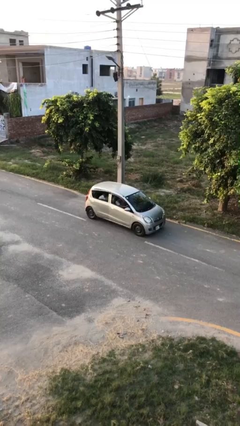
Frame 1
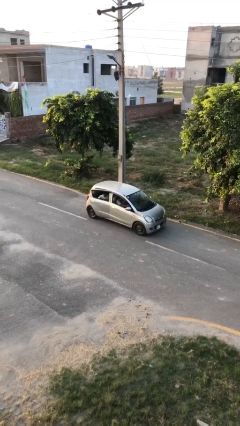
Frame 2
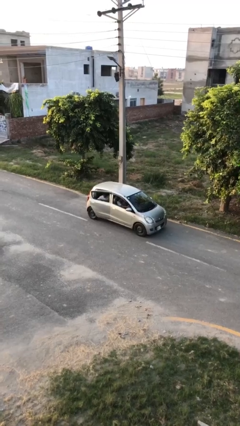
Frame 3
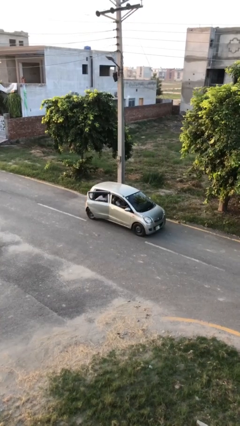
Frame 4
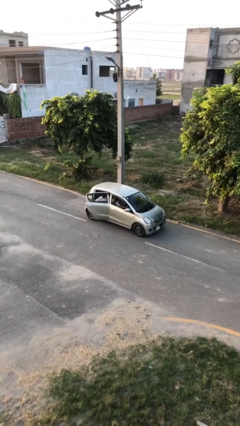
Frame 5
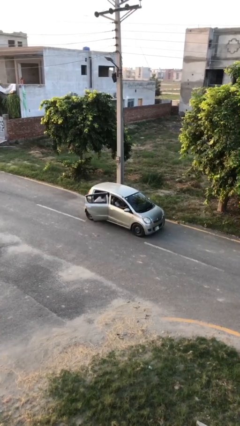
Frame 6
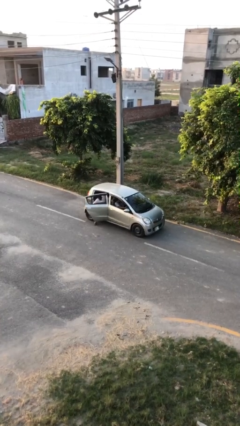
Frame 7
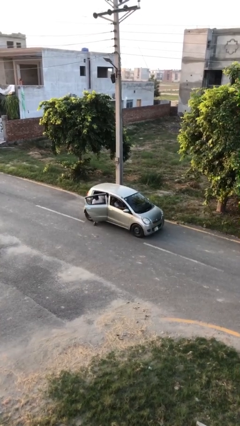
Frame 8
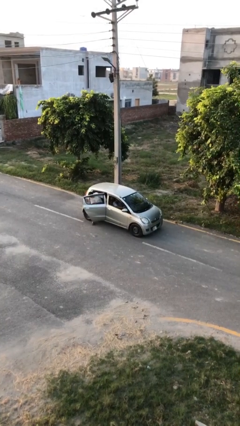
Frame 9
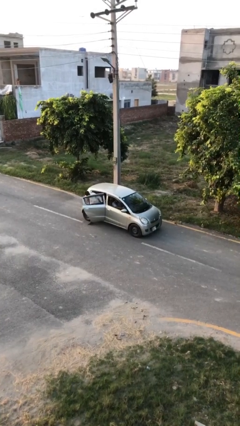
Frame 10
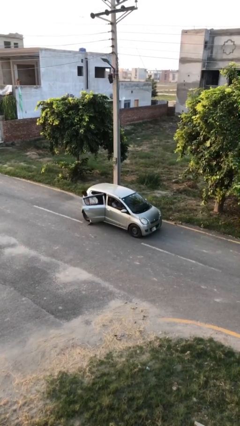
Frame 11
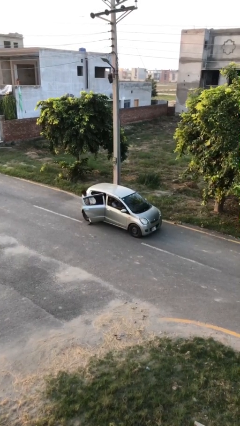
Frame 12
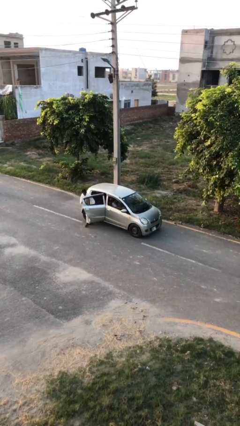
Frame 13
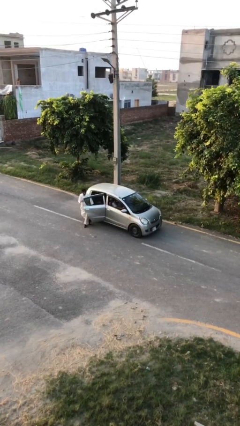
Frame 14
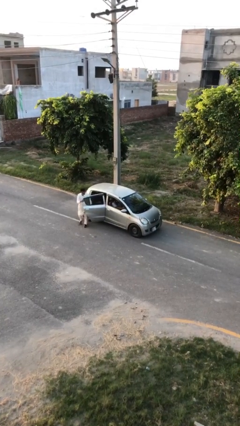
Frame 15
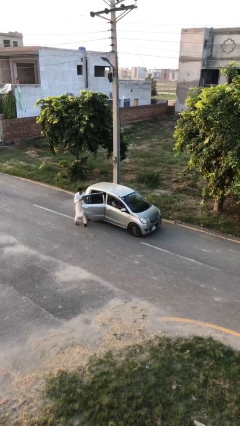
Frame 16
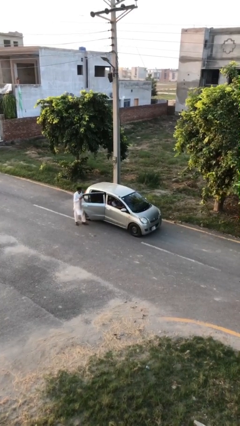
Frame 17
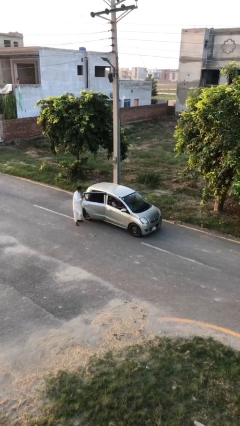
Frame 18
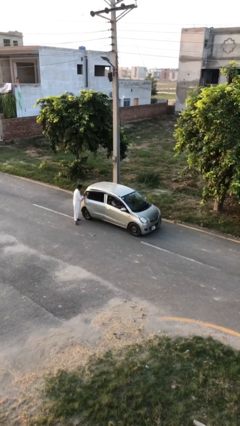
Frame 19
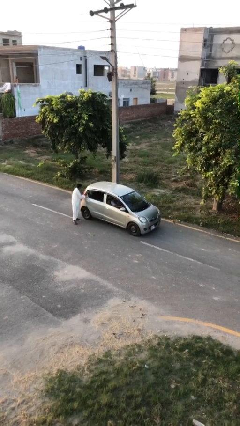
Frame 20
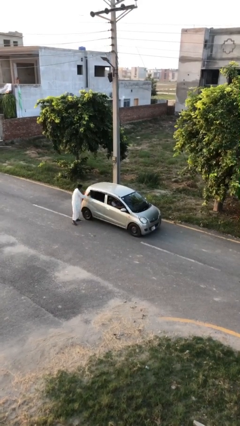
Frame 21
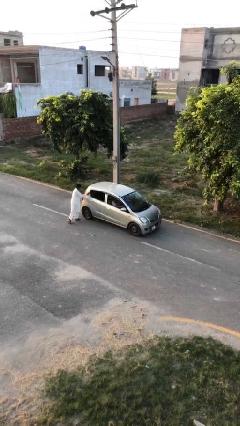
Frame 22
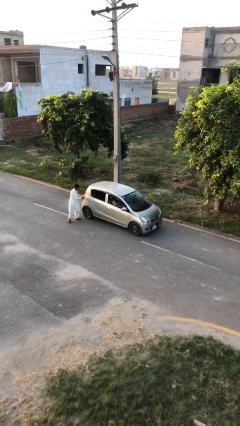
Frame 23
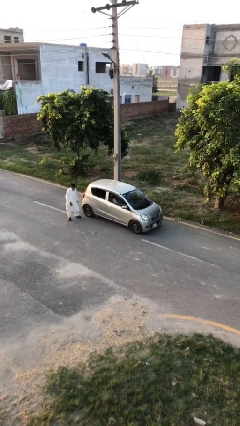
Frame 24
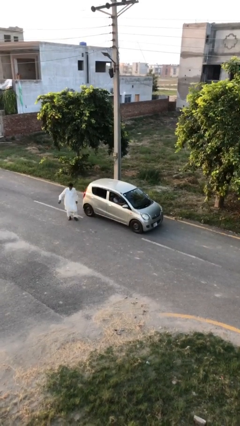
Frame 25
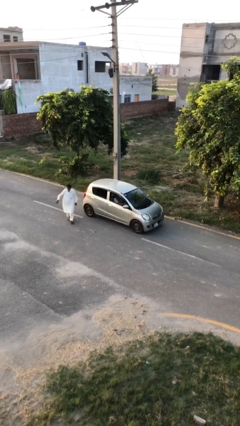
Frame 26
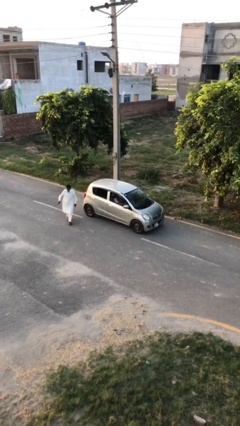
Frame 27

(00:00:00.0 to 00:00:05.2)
car drops off person

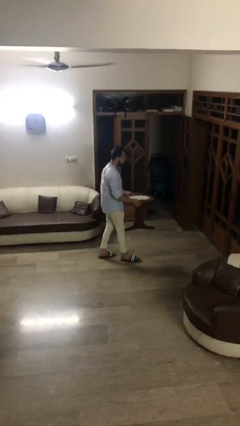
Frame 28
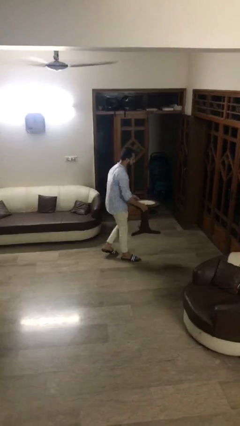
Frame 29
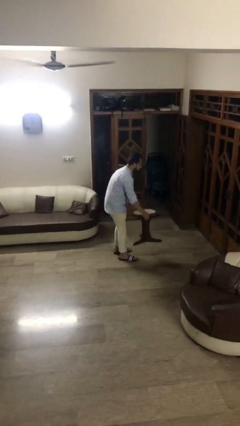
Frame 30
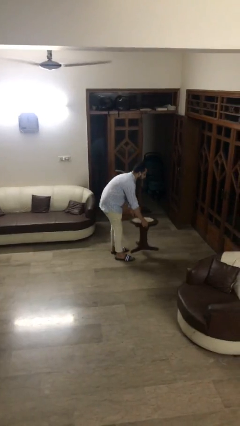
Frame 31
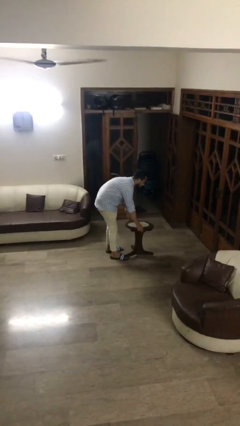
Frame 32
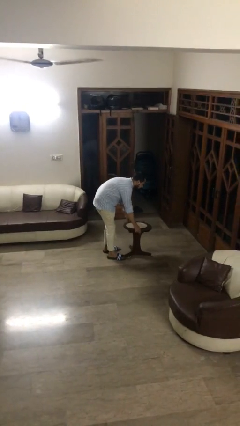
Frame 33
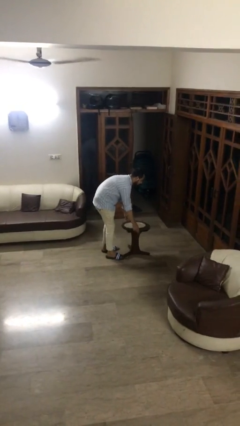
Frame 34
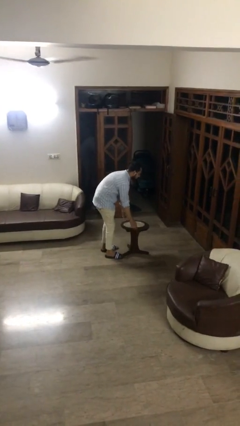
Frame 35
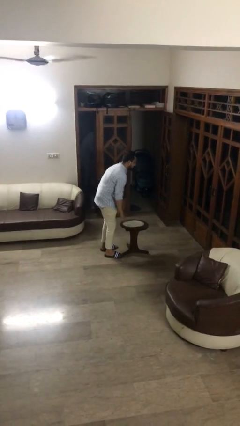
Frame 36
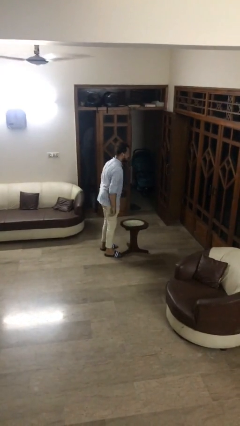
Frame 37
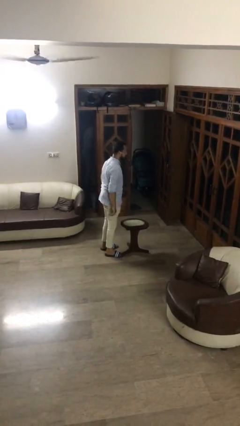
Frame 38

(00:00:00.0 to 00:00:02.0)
person puts down object on floor

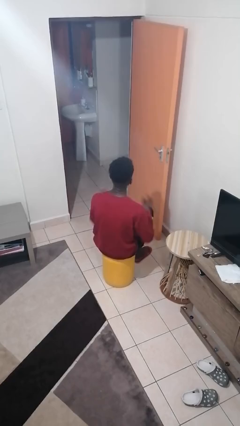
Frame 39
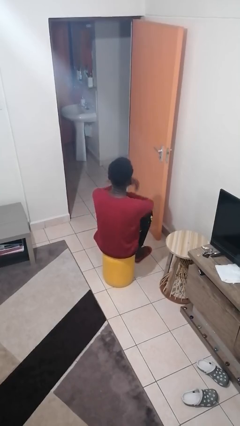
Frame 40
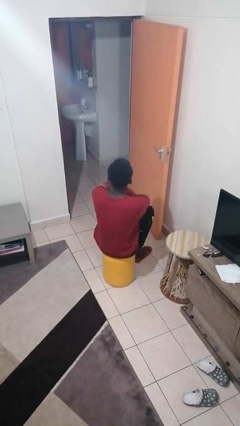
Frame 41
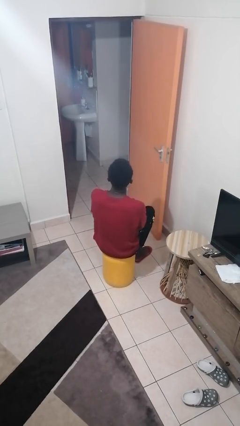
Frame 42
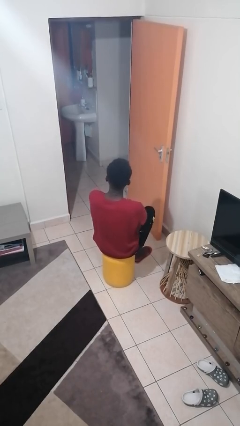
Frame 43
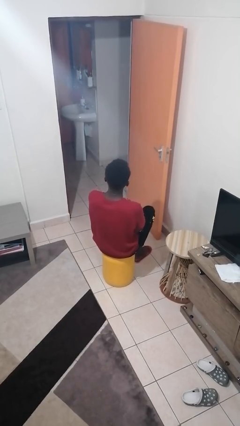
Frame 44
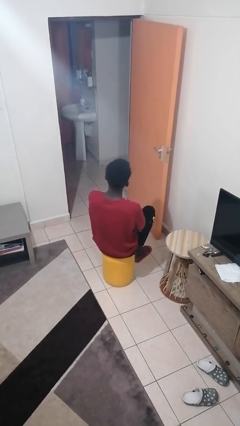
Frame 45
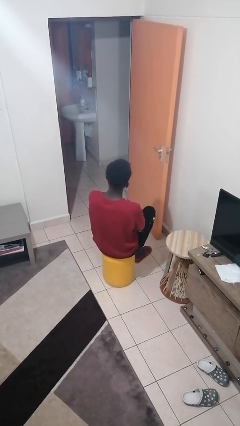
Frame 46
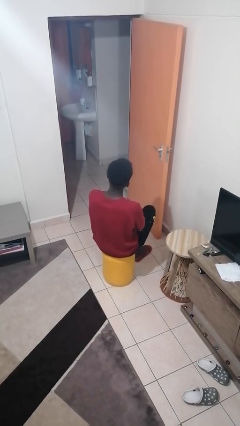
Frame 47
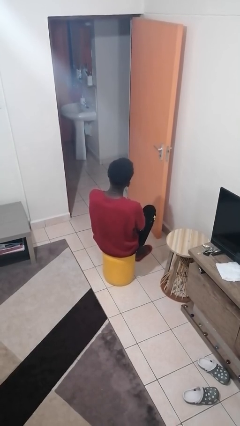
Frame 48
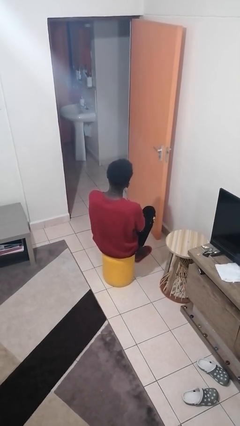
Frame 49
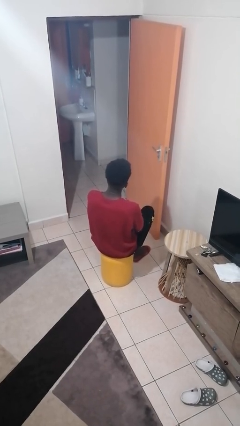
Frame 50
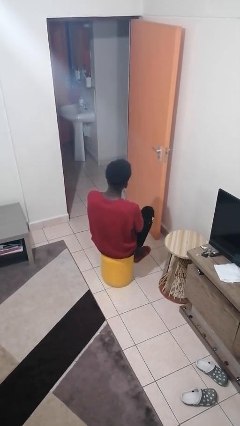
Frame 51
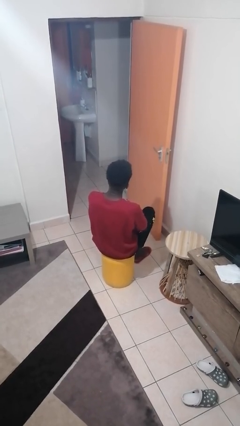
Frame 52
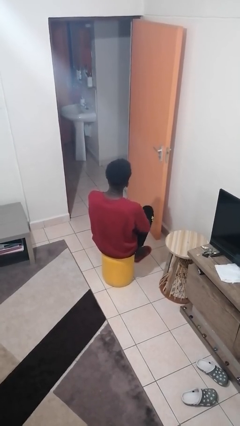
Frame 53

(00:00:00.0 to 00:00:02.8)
person crosses arms

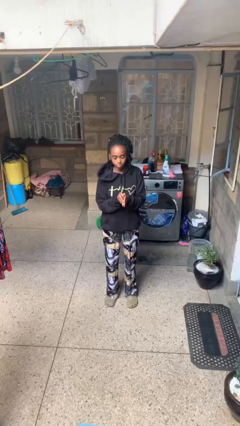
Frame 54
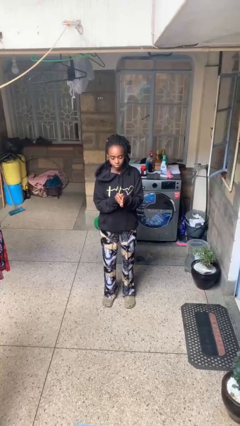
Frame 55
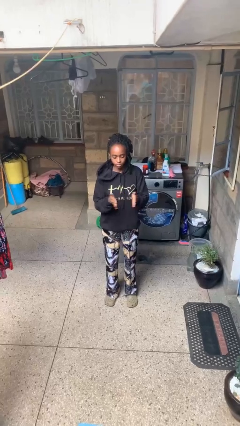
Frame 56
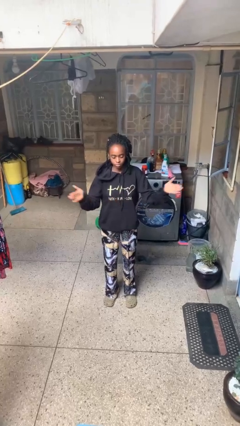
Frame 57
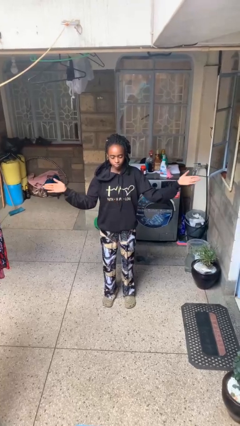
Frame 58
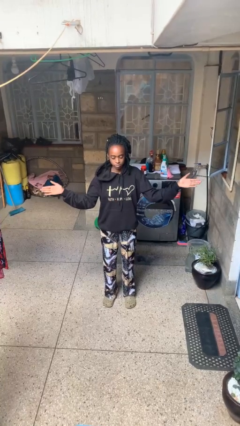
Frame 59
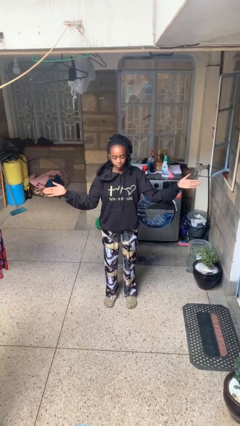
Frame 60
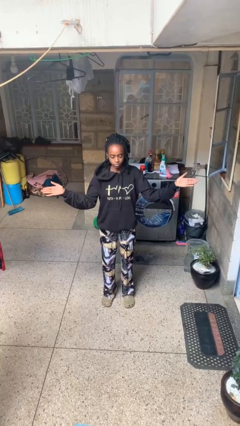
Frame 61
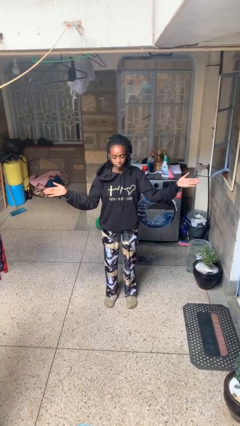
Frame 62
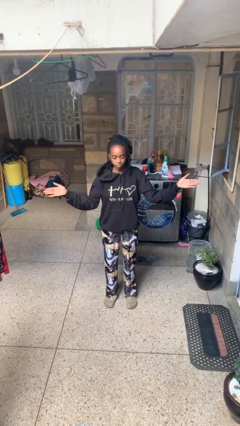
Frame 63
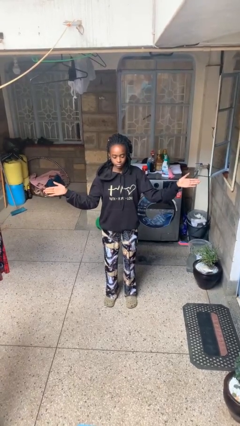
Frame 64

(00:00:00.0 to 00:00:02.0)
person gestures zoom in

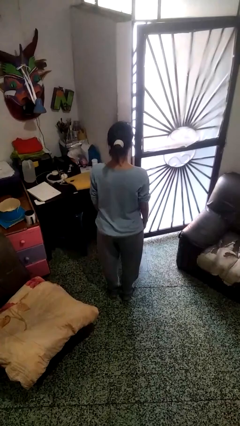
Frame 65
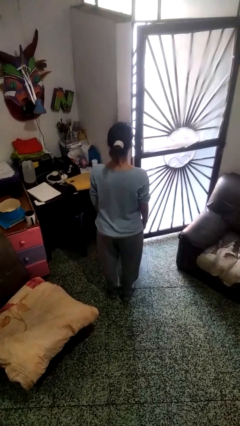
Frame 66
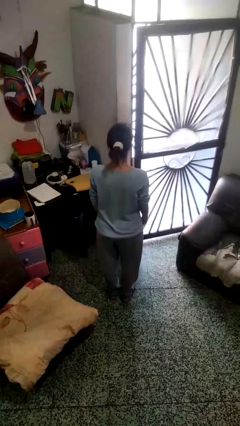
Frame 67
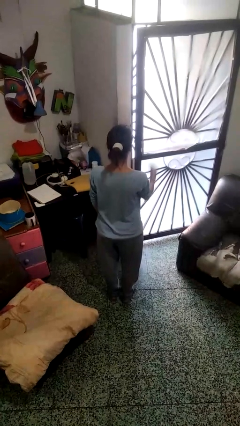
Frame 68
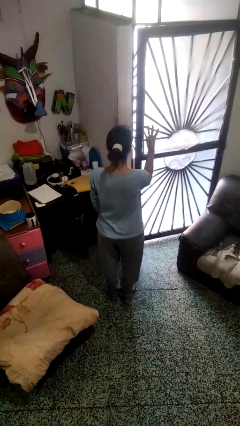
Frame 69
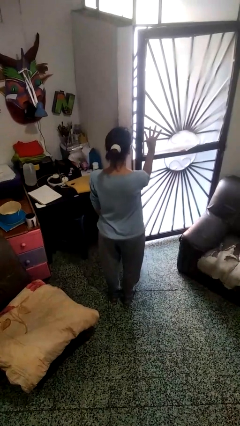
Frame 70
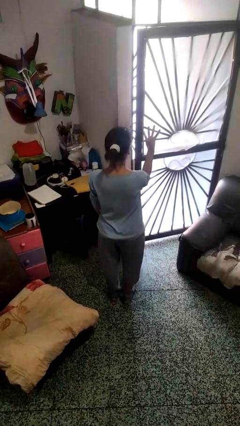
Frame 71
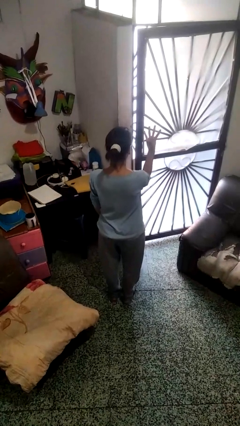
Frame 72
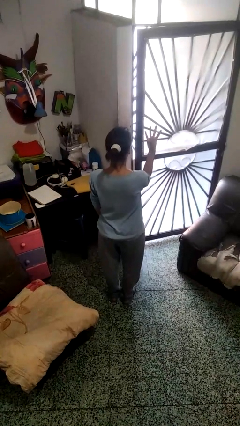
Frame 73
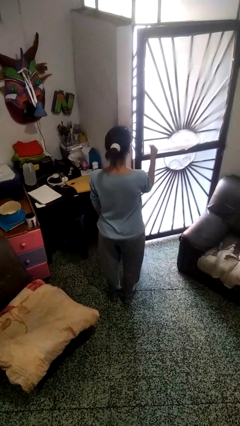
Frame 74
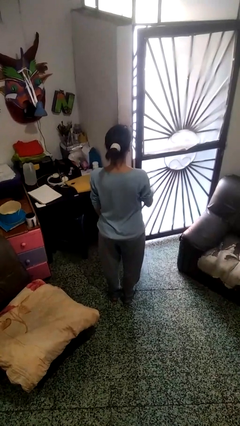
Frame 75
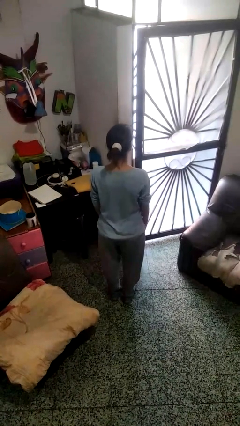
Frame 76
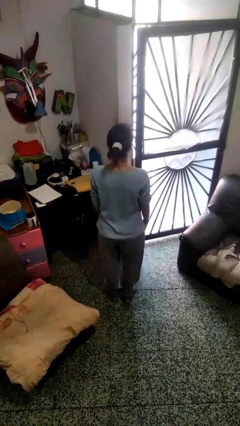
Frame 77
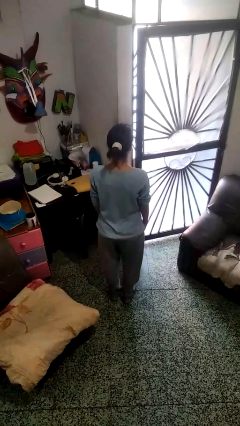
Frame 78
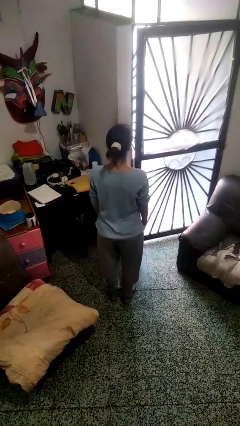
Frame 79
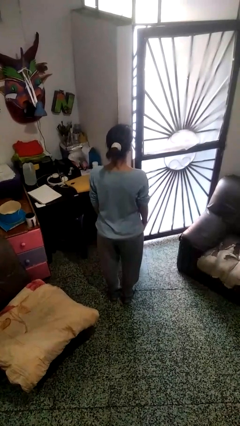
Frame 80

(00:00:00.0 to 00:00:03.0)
person gestures number four

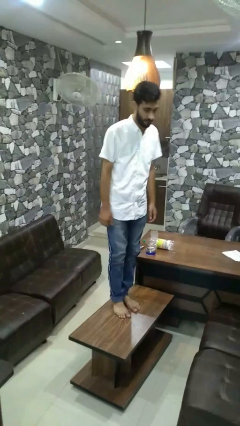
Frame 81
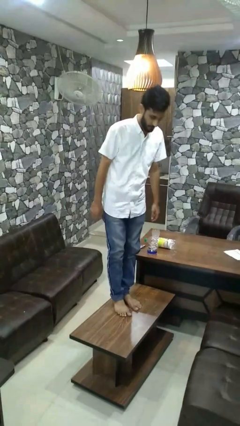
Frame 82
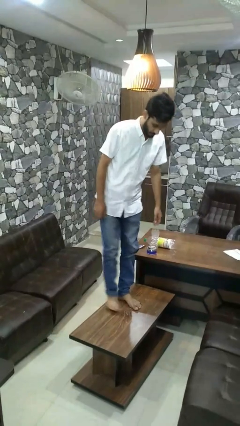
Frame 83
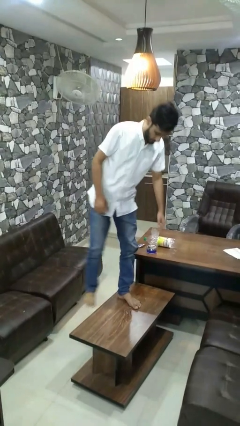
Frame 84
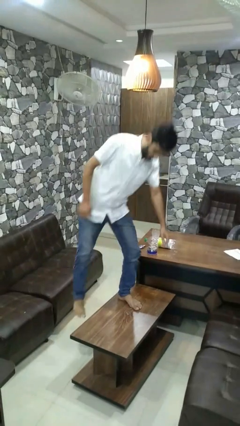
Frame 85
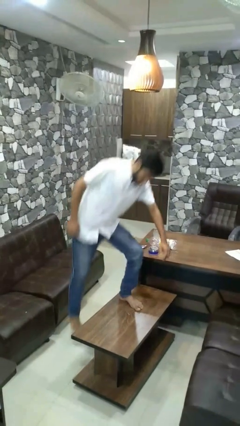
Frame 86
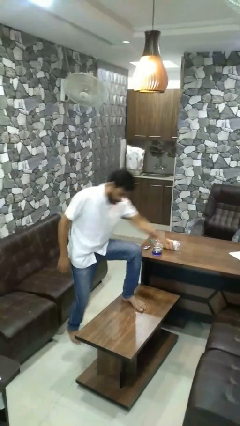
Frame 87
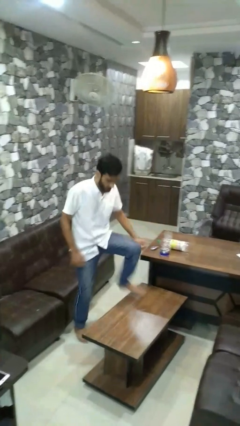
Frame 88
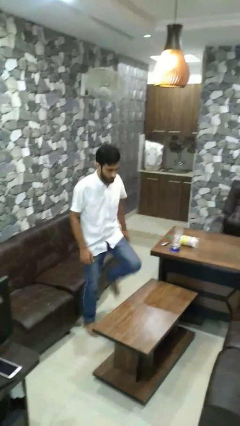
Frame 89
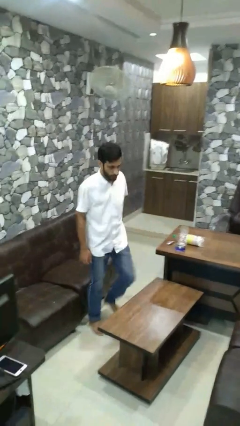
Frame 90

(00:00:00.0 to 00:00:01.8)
person climbs off table

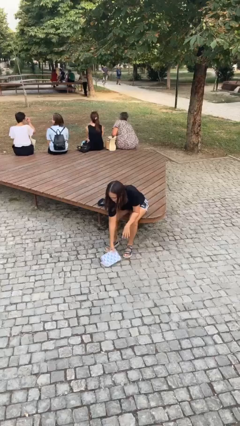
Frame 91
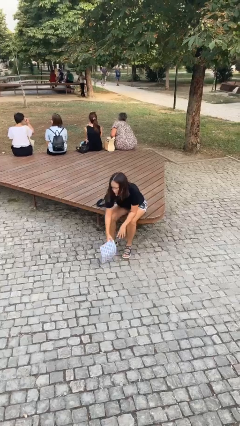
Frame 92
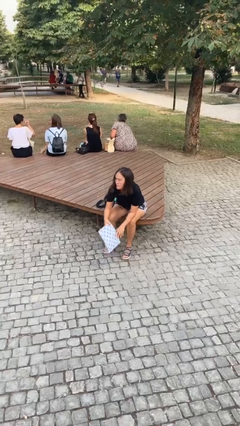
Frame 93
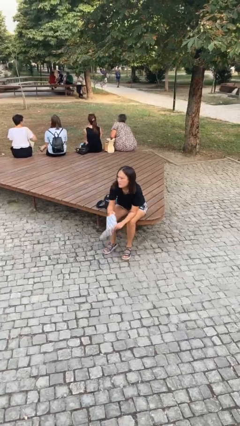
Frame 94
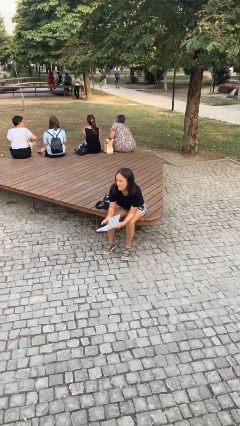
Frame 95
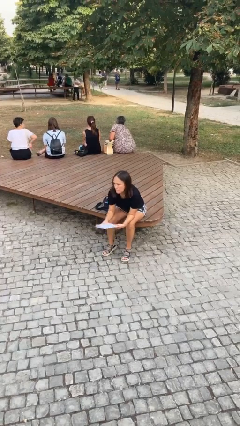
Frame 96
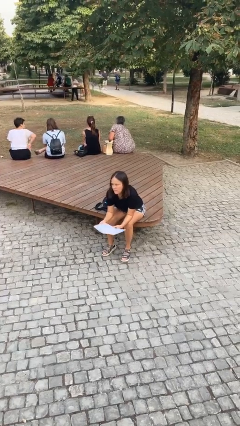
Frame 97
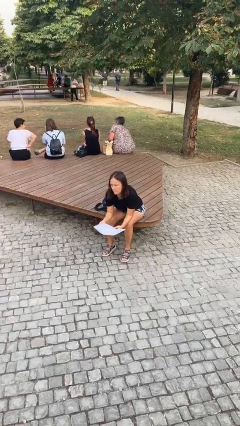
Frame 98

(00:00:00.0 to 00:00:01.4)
person picks up object from floor
